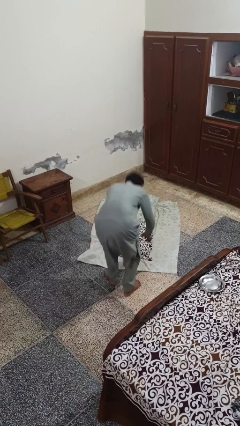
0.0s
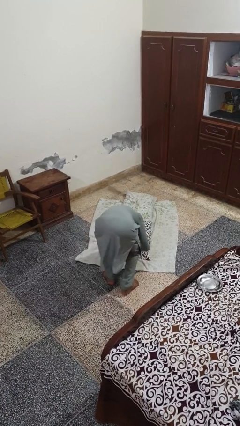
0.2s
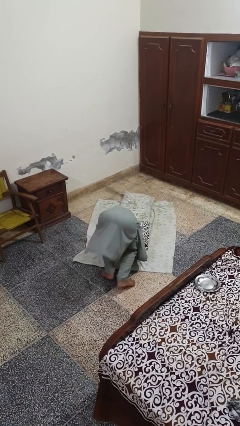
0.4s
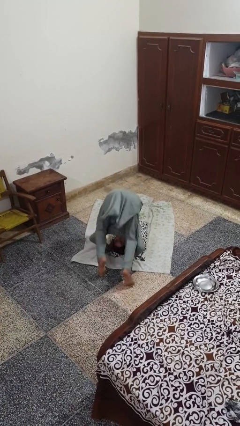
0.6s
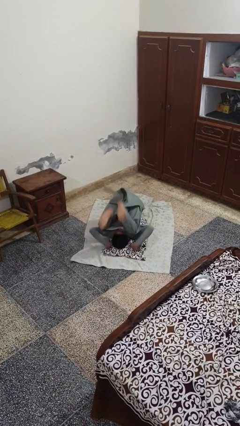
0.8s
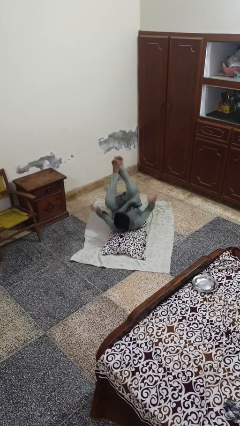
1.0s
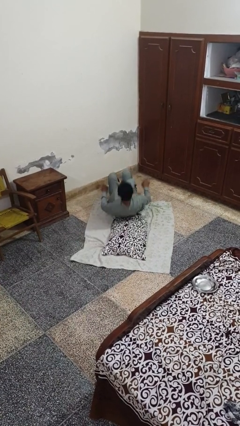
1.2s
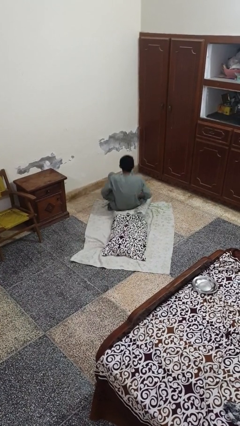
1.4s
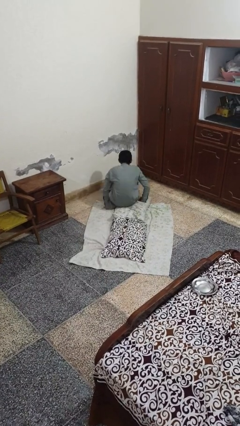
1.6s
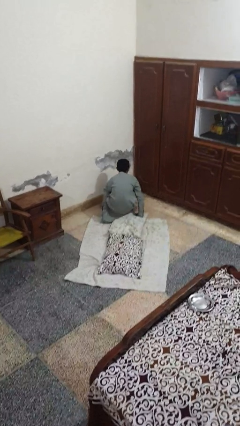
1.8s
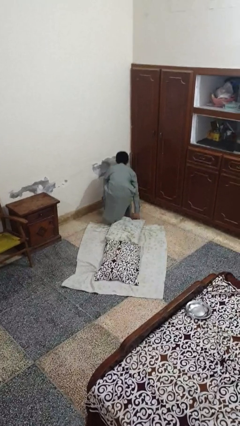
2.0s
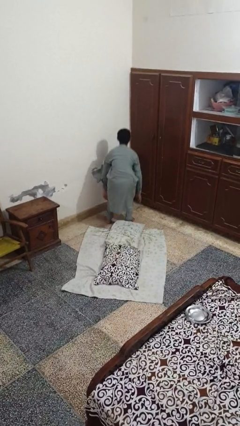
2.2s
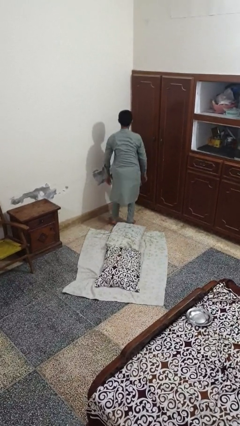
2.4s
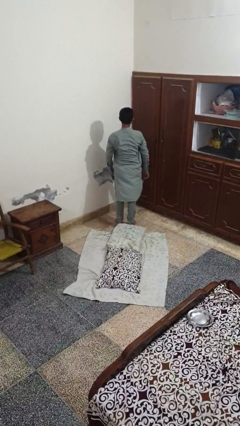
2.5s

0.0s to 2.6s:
person somersaults

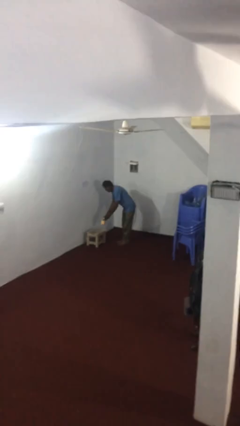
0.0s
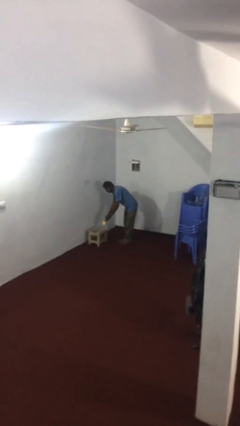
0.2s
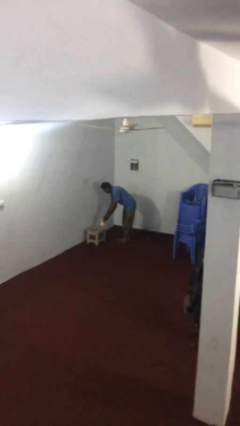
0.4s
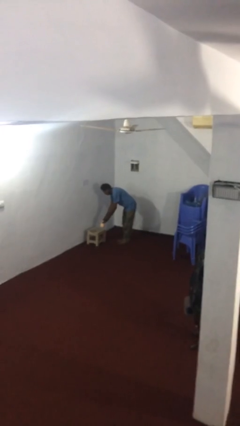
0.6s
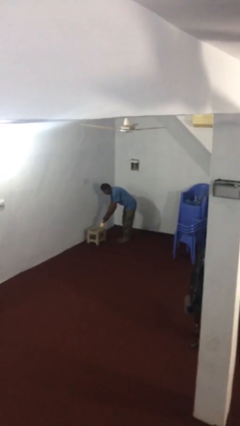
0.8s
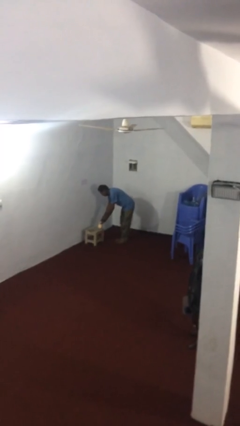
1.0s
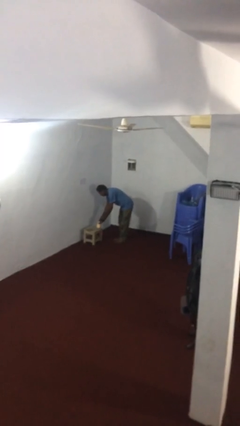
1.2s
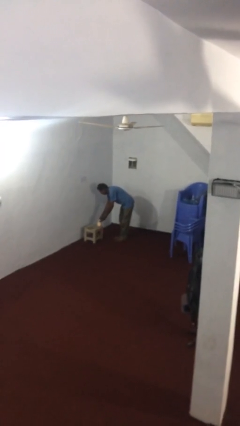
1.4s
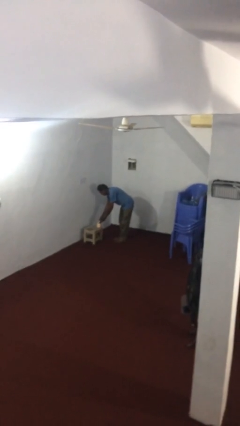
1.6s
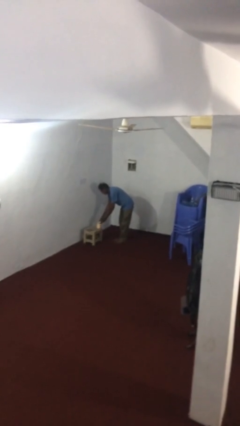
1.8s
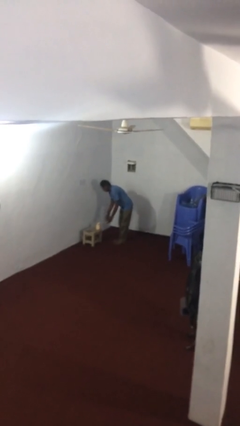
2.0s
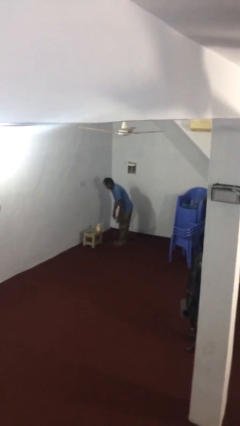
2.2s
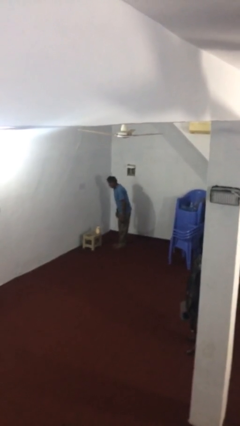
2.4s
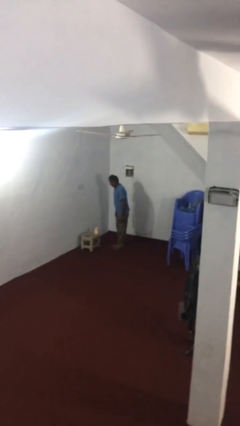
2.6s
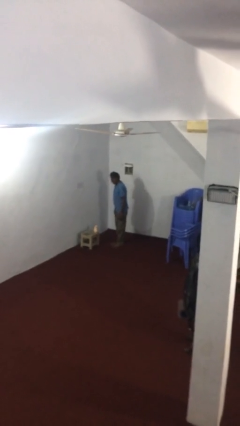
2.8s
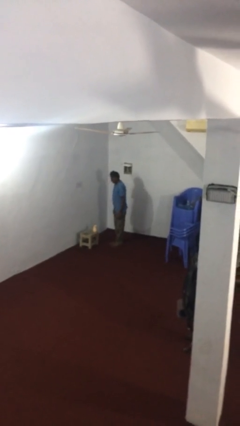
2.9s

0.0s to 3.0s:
person puts down object on table

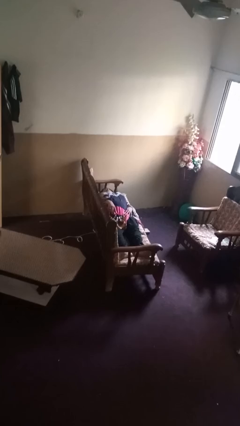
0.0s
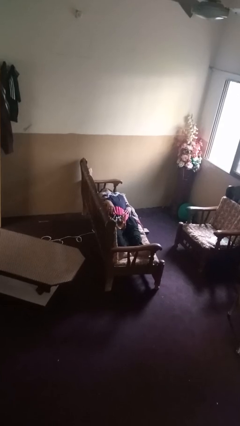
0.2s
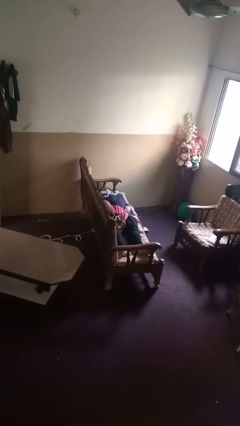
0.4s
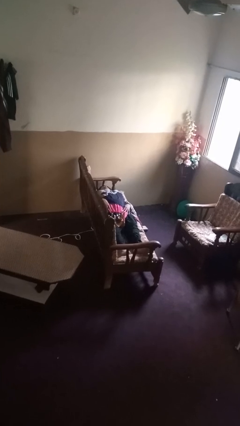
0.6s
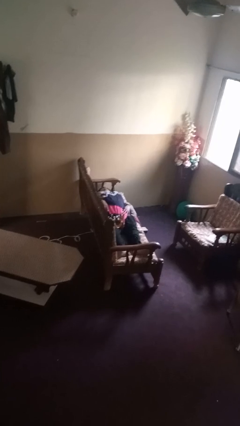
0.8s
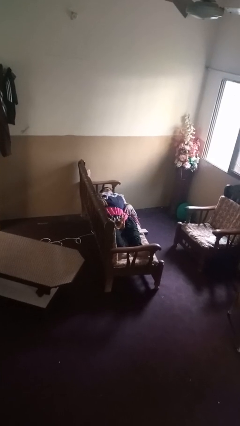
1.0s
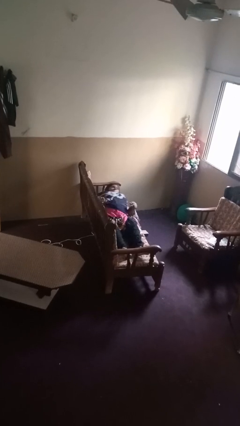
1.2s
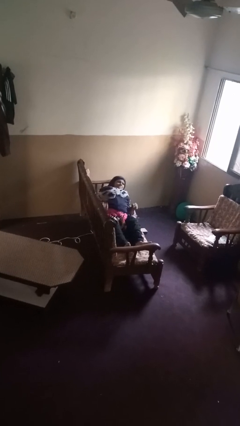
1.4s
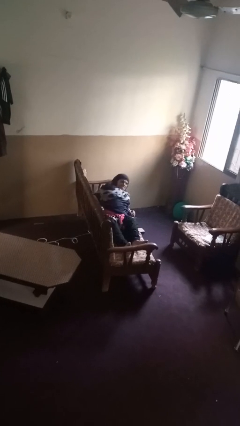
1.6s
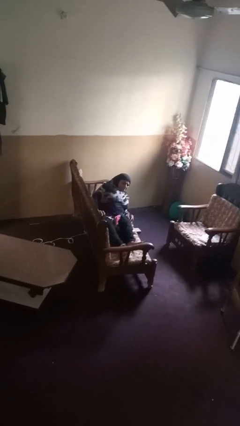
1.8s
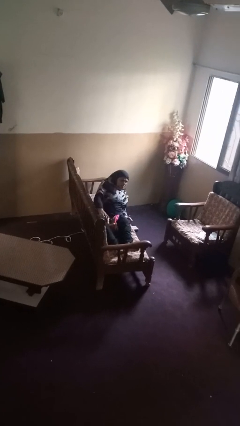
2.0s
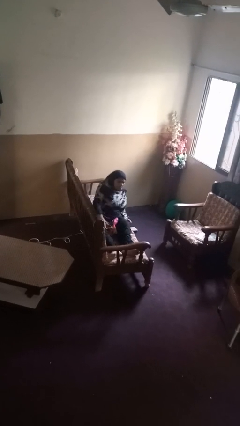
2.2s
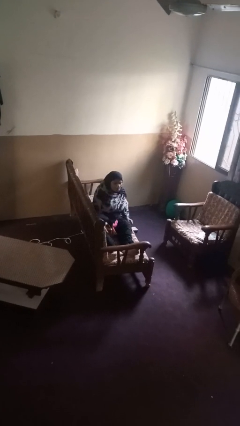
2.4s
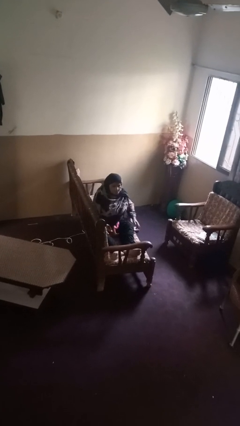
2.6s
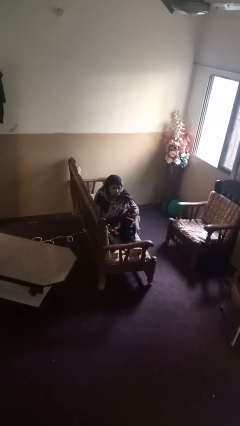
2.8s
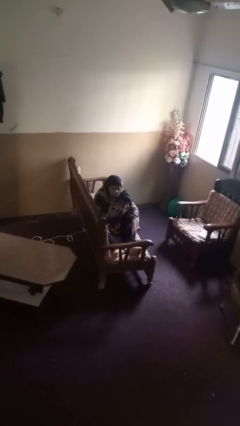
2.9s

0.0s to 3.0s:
person stands up

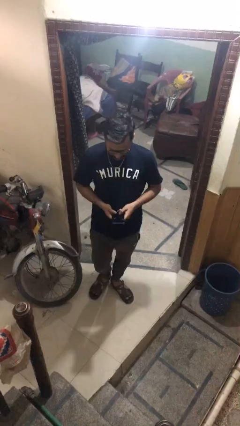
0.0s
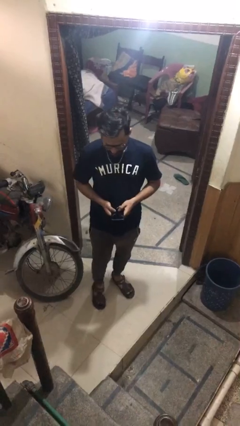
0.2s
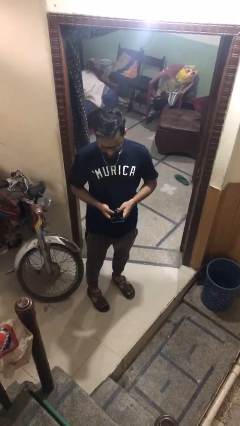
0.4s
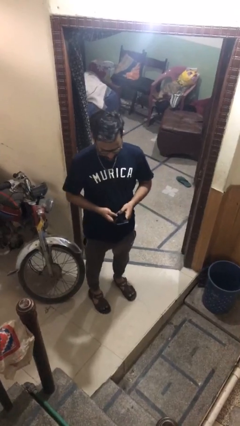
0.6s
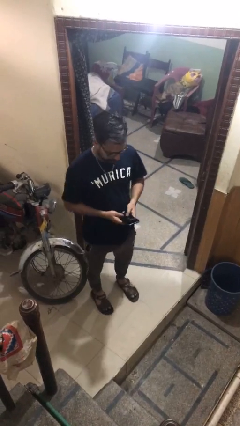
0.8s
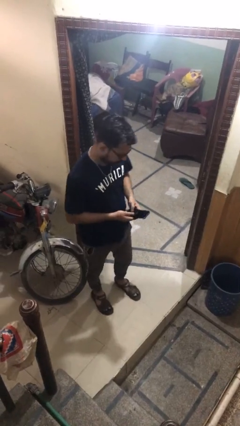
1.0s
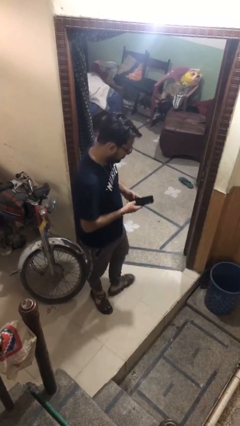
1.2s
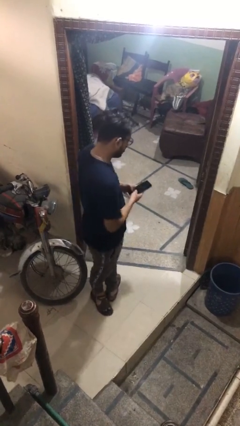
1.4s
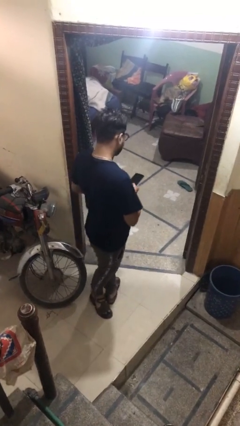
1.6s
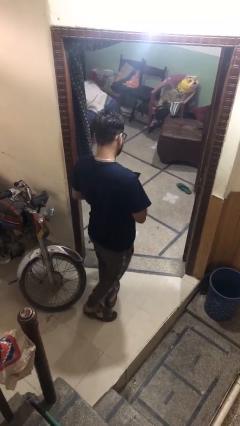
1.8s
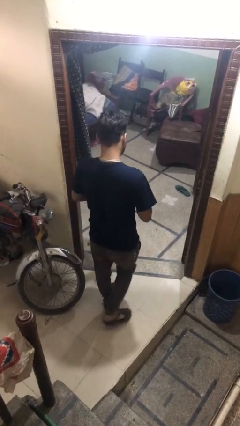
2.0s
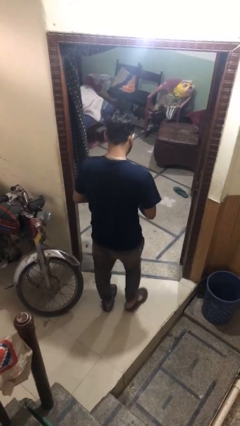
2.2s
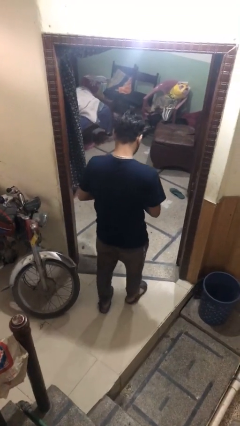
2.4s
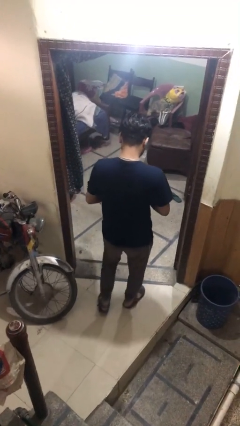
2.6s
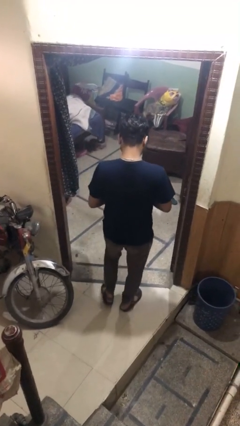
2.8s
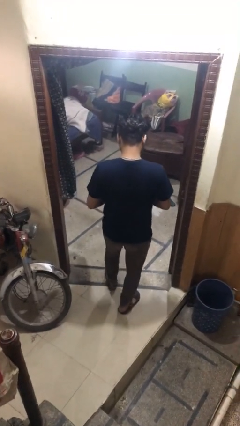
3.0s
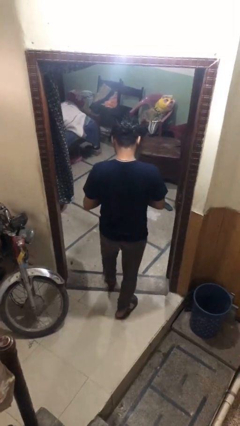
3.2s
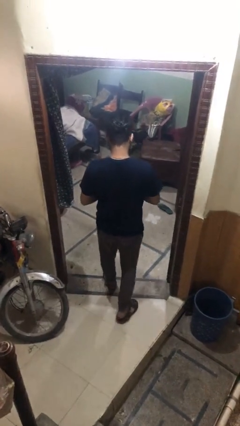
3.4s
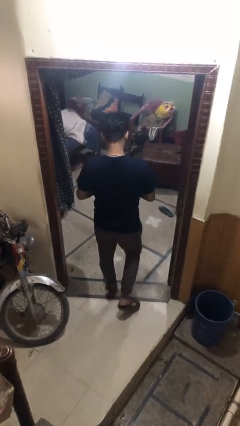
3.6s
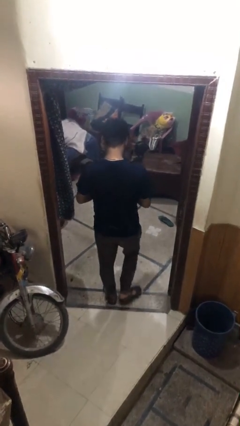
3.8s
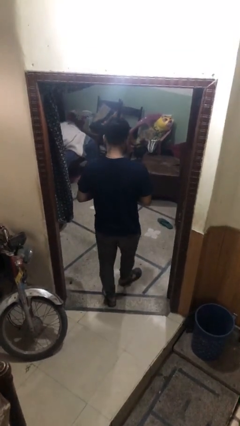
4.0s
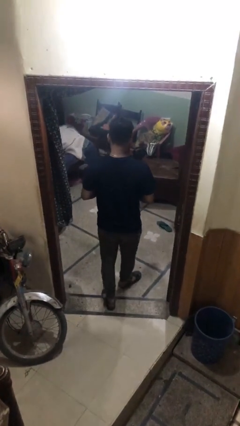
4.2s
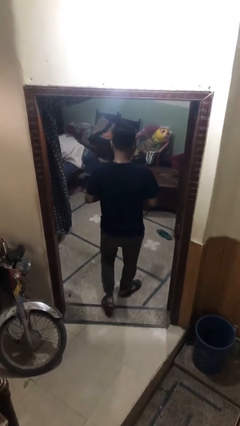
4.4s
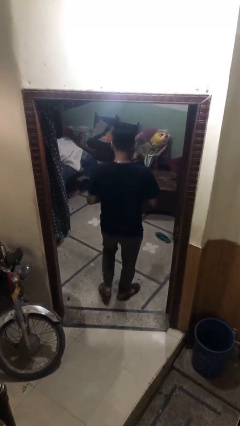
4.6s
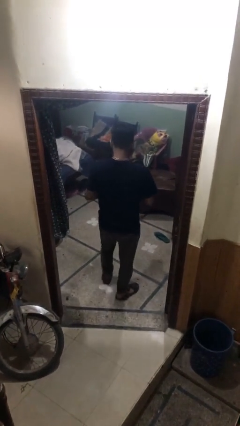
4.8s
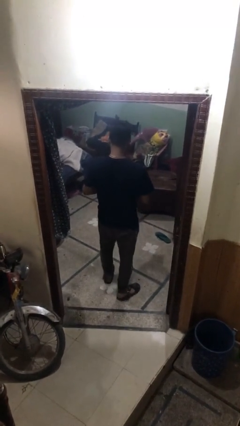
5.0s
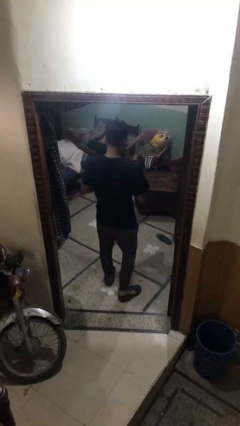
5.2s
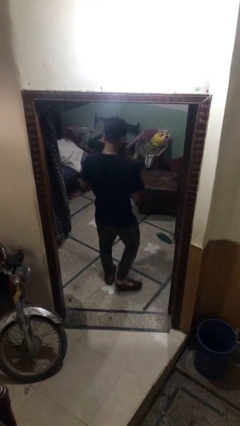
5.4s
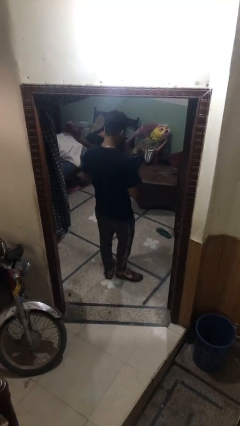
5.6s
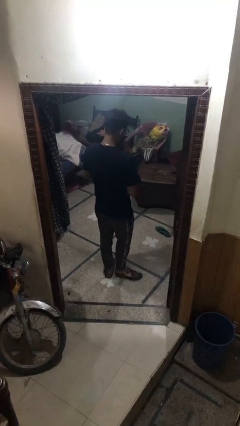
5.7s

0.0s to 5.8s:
person exits scene through structure

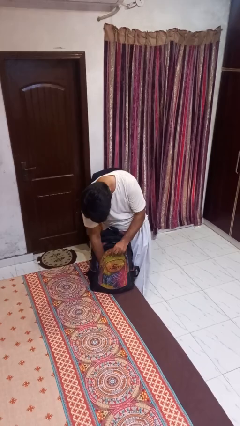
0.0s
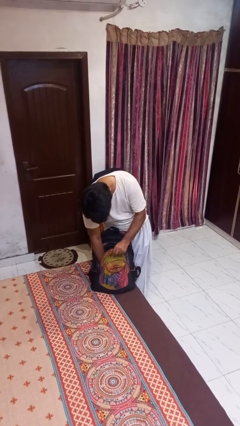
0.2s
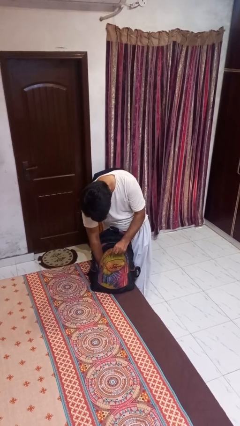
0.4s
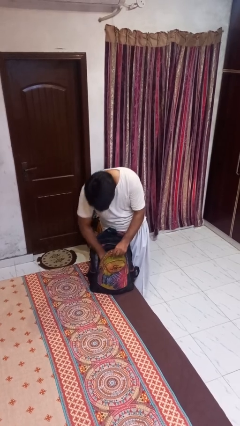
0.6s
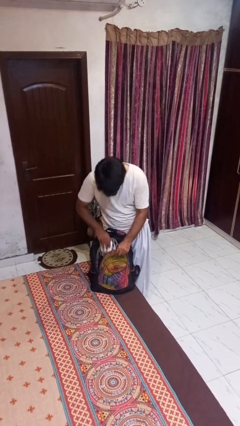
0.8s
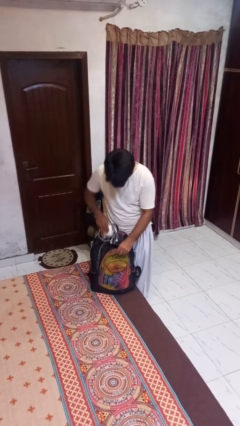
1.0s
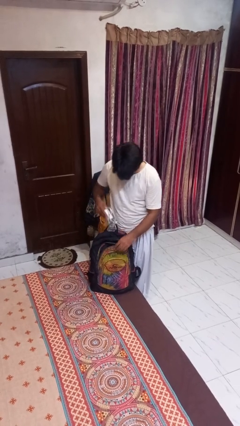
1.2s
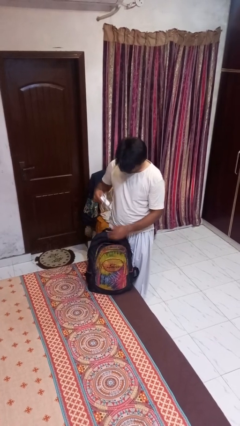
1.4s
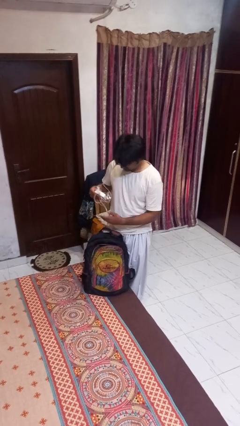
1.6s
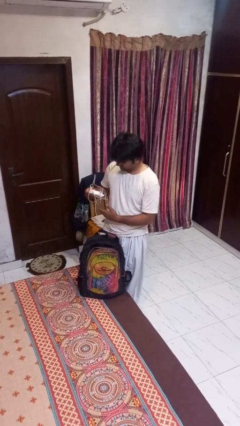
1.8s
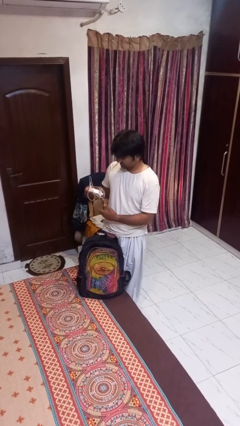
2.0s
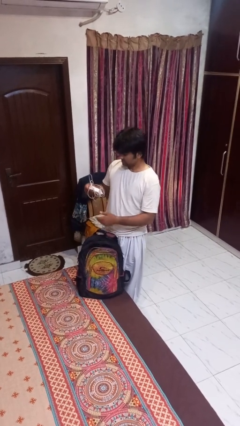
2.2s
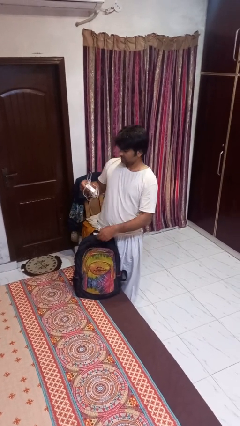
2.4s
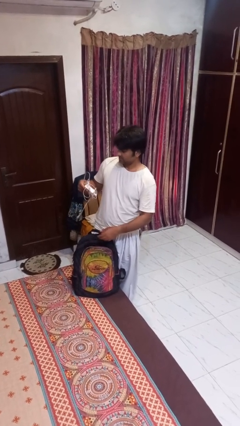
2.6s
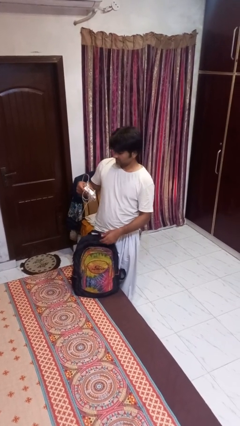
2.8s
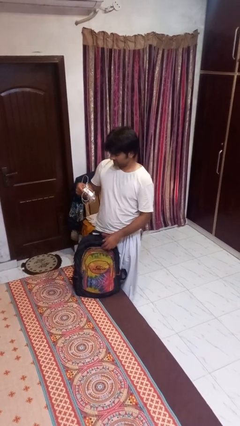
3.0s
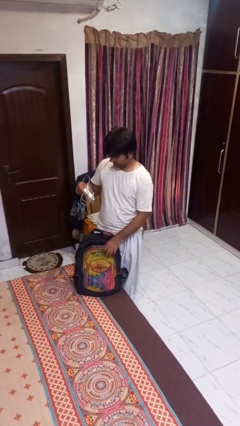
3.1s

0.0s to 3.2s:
person takes object from backpack

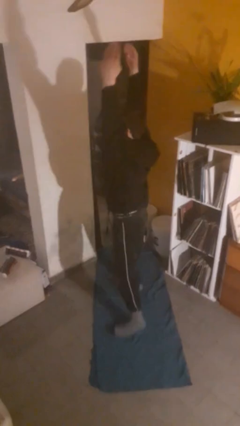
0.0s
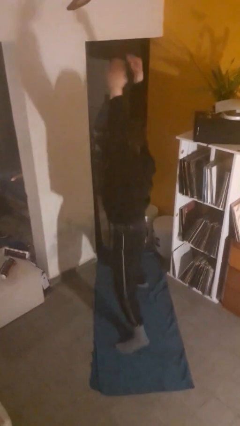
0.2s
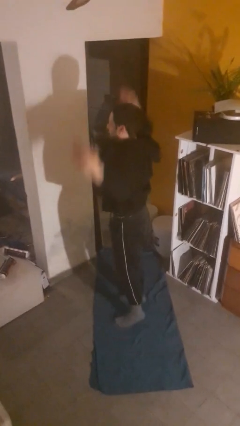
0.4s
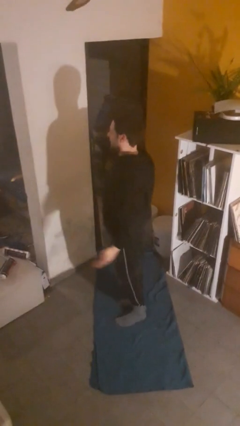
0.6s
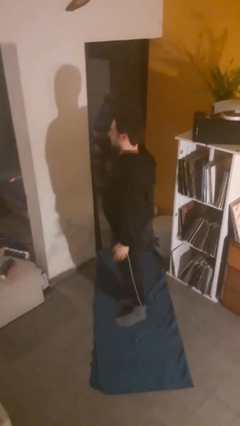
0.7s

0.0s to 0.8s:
person exercises with jumping jacks
